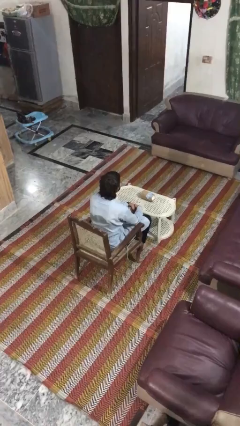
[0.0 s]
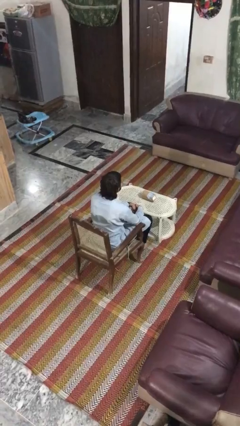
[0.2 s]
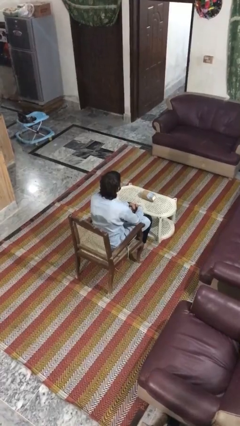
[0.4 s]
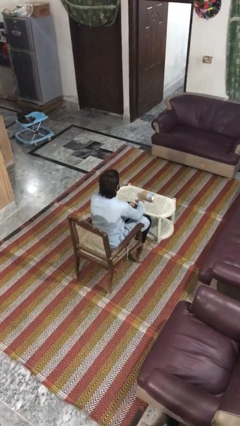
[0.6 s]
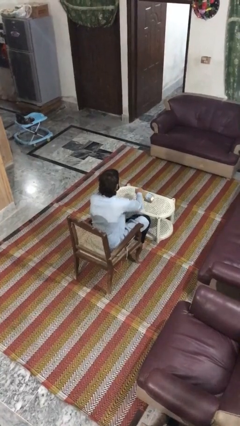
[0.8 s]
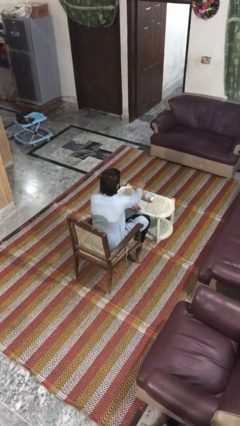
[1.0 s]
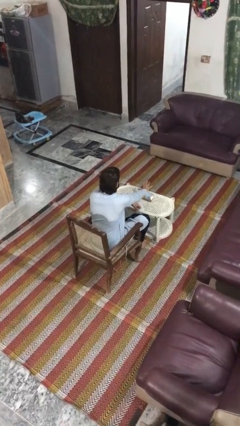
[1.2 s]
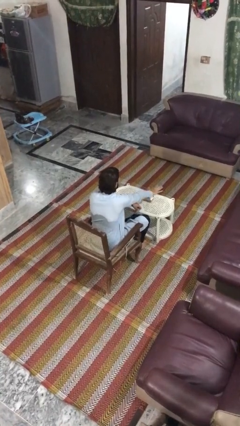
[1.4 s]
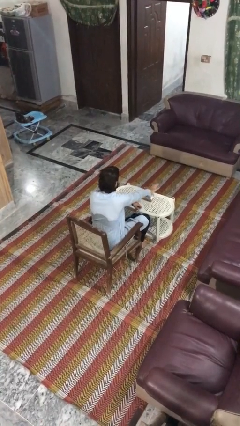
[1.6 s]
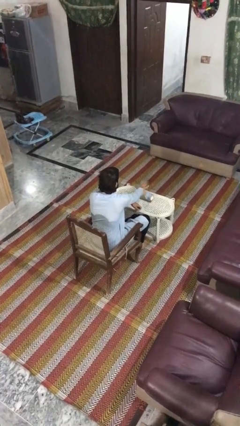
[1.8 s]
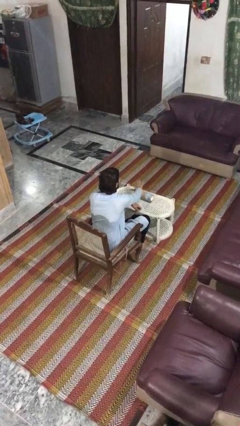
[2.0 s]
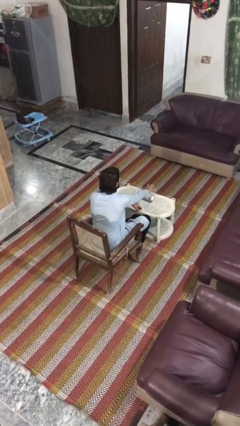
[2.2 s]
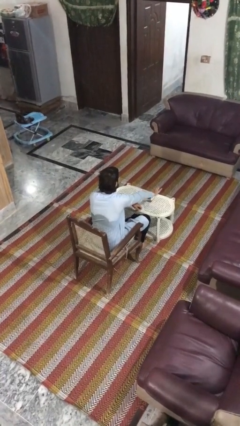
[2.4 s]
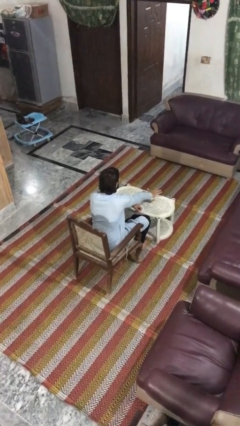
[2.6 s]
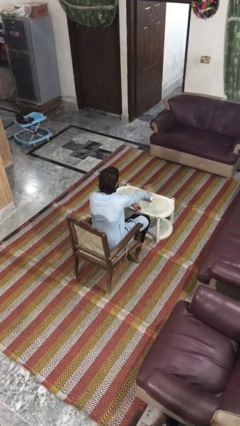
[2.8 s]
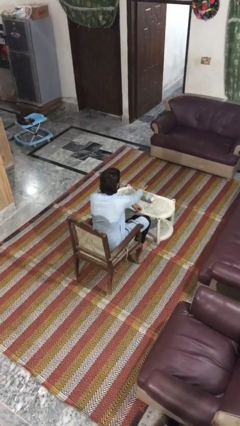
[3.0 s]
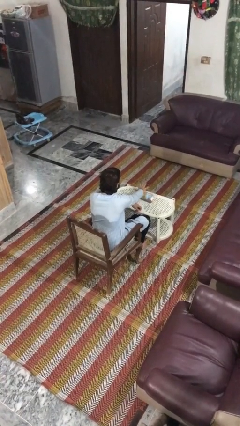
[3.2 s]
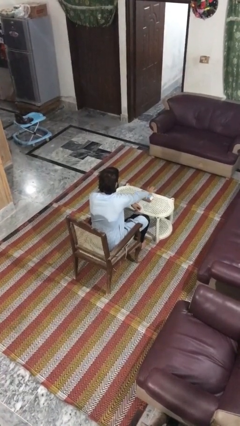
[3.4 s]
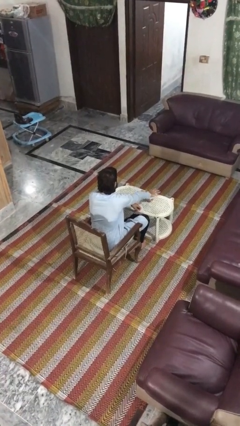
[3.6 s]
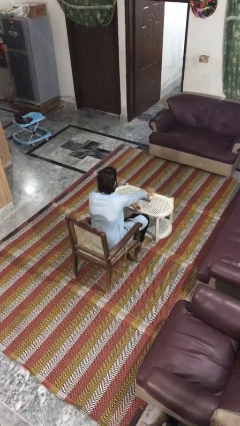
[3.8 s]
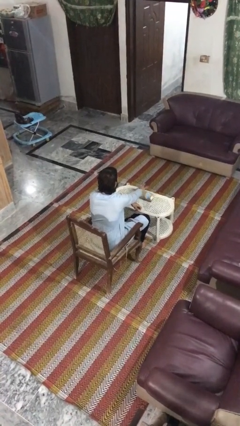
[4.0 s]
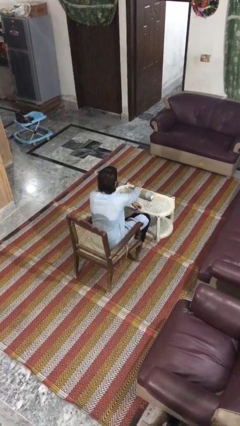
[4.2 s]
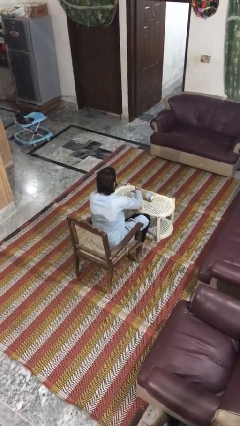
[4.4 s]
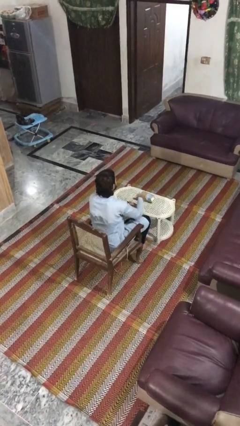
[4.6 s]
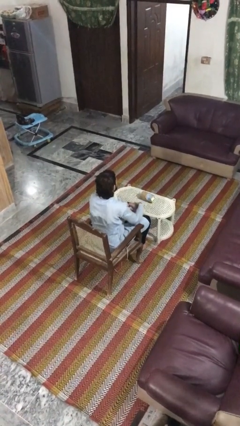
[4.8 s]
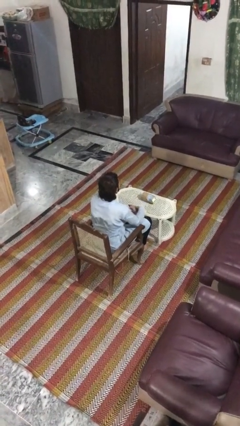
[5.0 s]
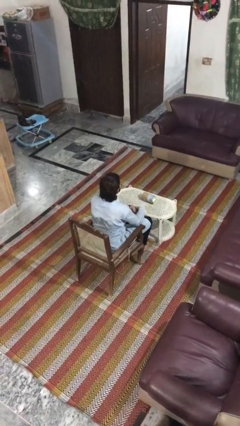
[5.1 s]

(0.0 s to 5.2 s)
person waves hand over object

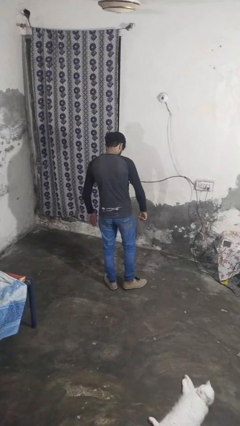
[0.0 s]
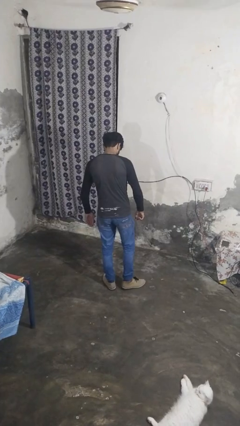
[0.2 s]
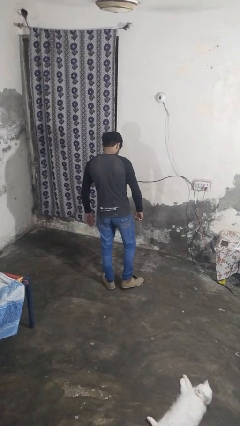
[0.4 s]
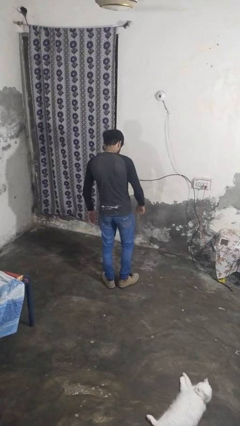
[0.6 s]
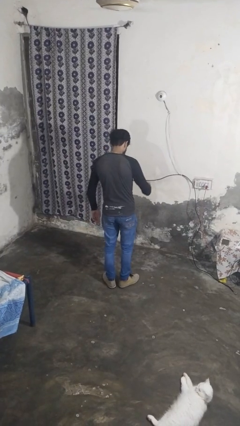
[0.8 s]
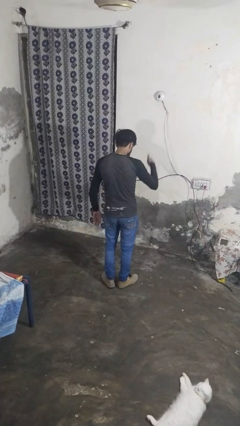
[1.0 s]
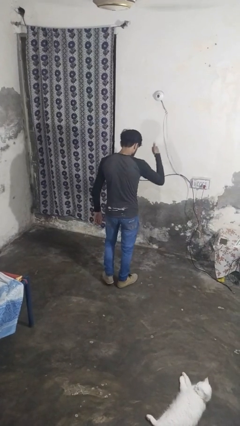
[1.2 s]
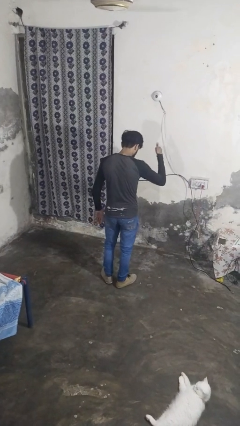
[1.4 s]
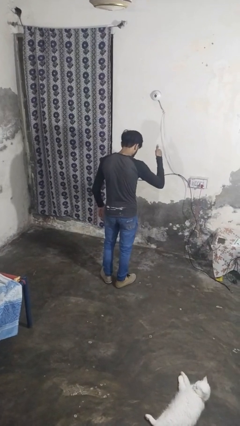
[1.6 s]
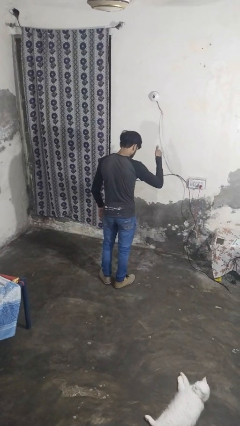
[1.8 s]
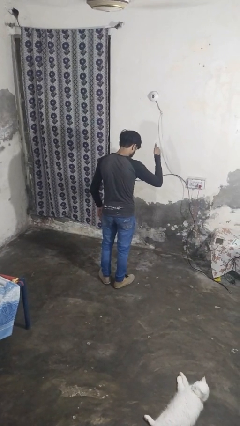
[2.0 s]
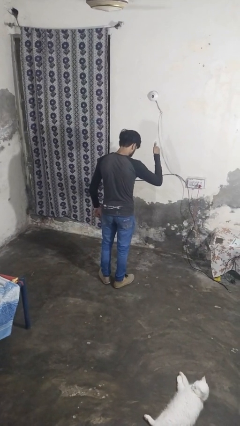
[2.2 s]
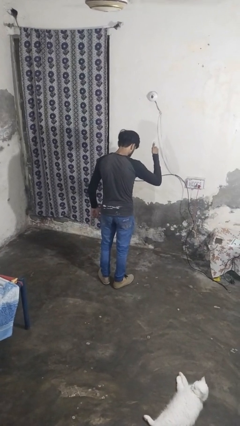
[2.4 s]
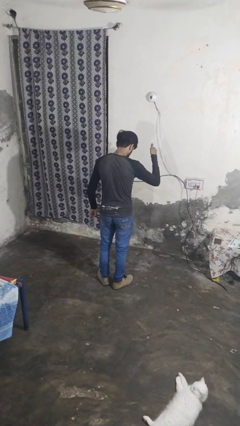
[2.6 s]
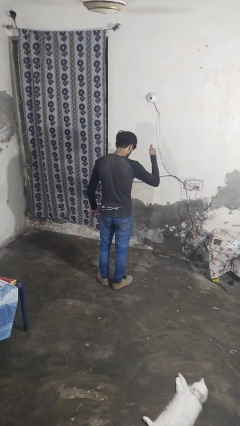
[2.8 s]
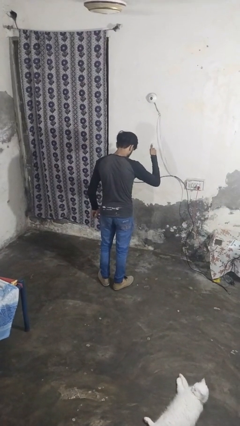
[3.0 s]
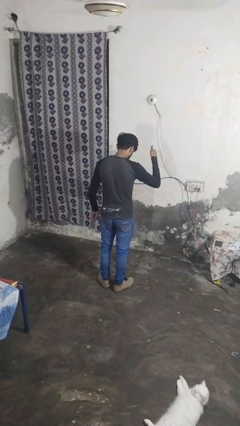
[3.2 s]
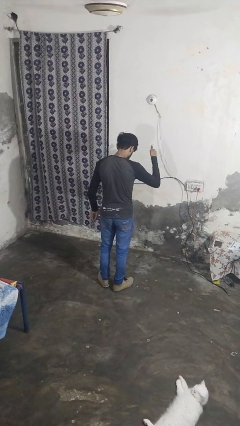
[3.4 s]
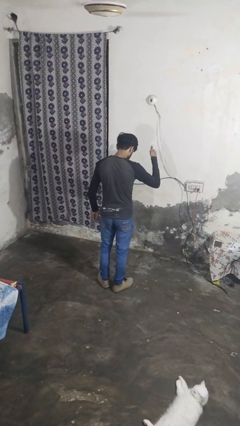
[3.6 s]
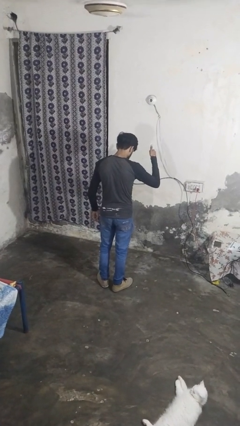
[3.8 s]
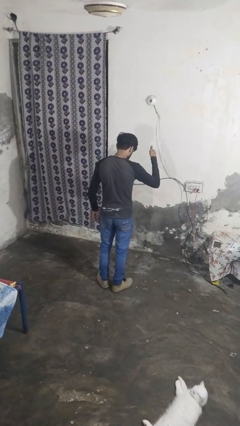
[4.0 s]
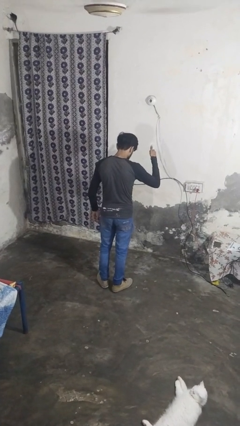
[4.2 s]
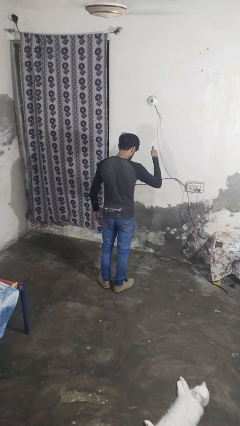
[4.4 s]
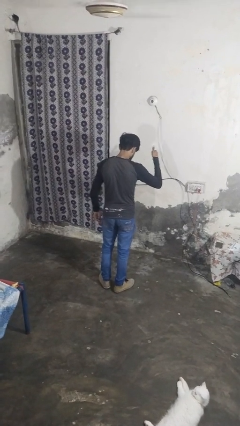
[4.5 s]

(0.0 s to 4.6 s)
person gestures thumbs up

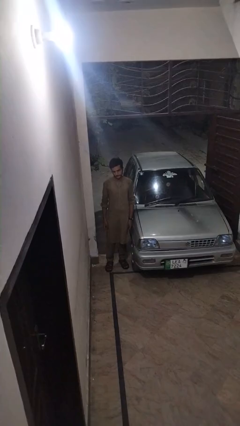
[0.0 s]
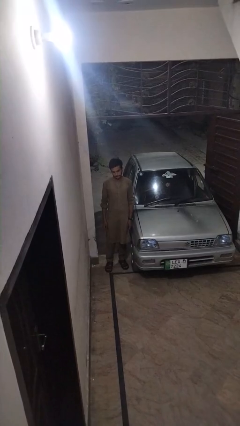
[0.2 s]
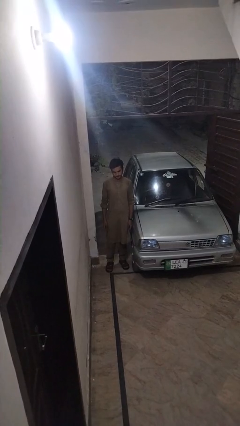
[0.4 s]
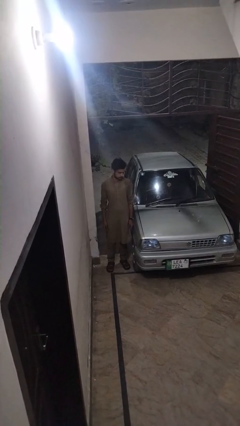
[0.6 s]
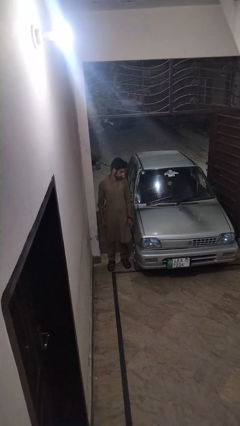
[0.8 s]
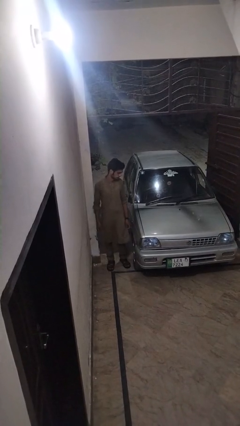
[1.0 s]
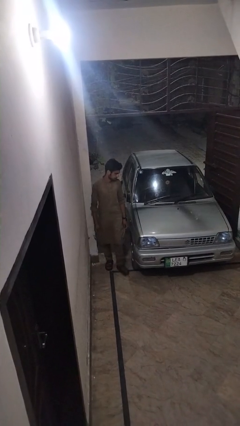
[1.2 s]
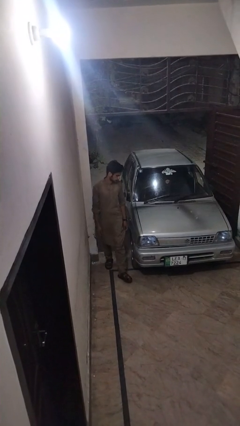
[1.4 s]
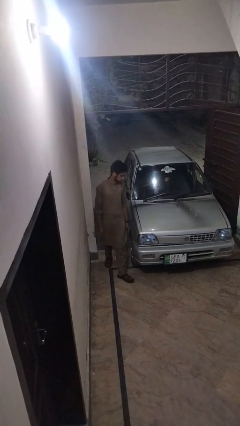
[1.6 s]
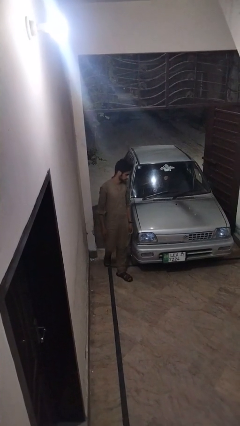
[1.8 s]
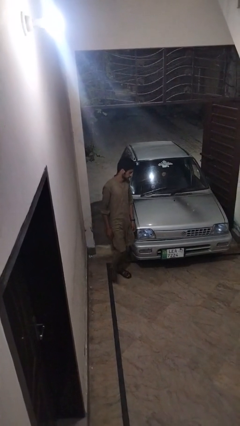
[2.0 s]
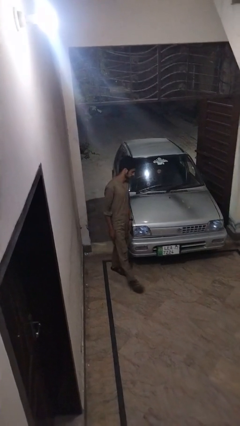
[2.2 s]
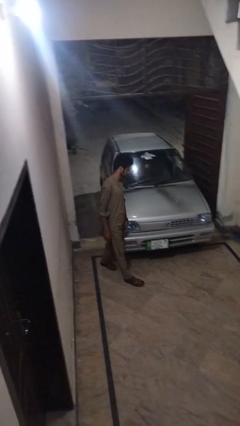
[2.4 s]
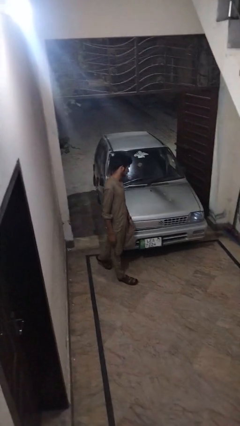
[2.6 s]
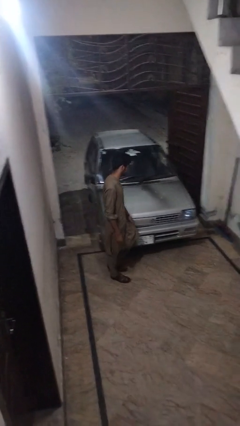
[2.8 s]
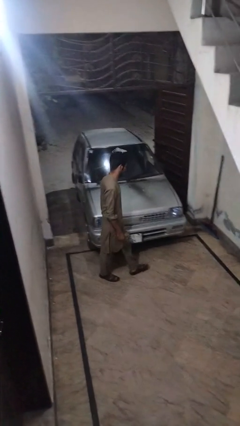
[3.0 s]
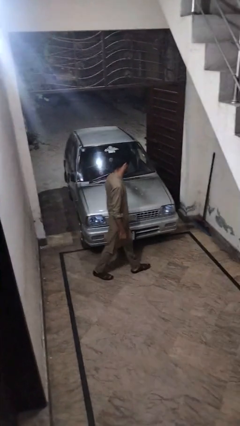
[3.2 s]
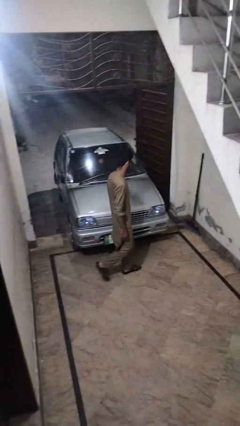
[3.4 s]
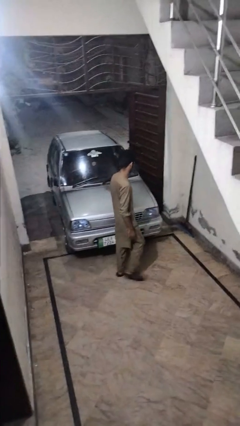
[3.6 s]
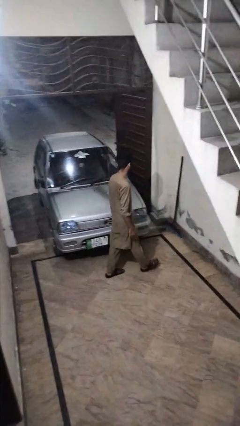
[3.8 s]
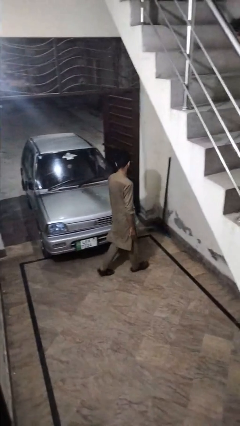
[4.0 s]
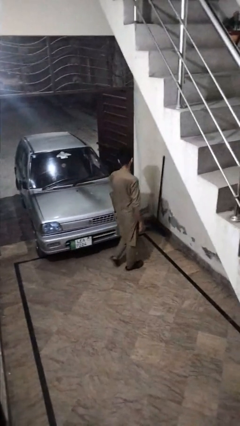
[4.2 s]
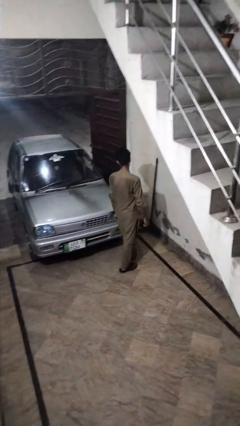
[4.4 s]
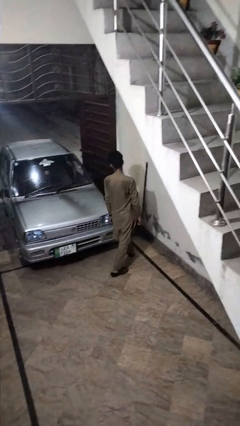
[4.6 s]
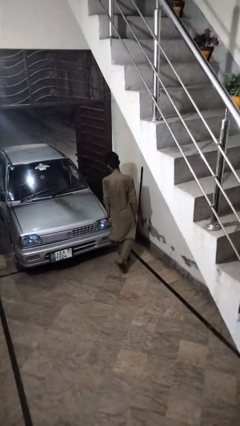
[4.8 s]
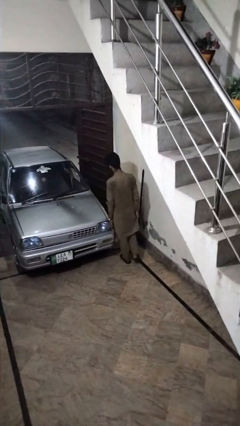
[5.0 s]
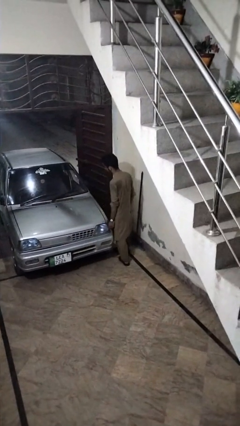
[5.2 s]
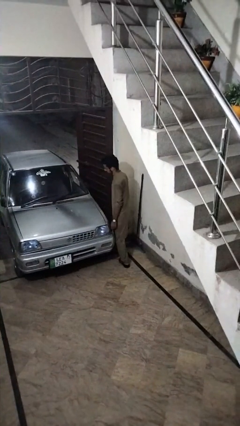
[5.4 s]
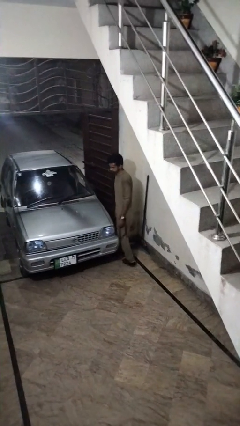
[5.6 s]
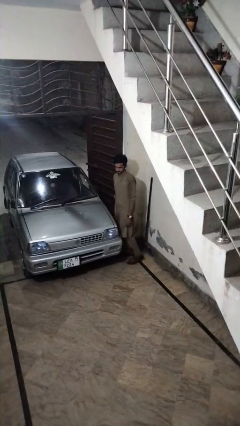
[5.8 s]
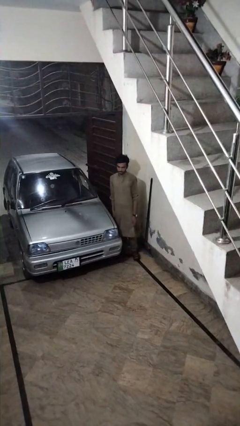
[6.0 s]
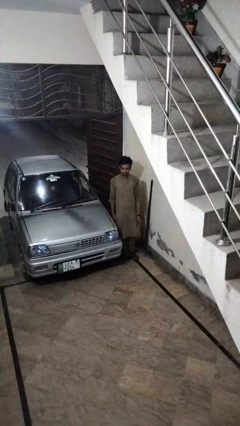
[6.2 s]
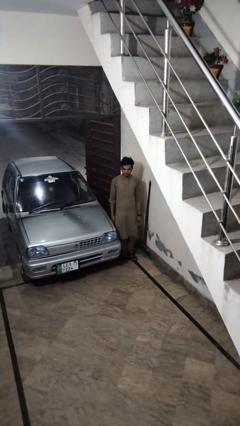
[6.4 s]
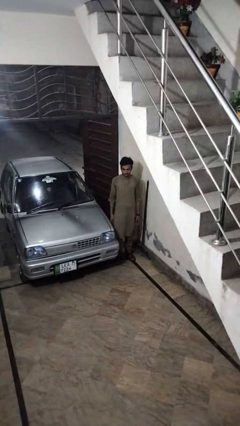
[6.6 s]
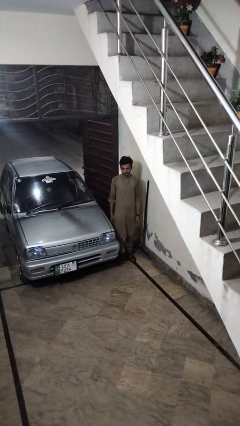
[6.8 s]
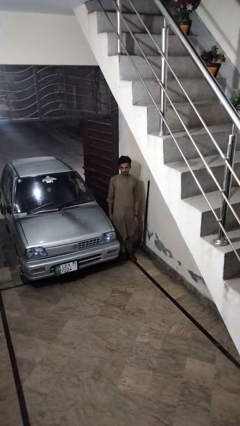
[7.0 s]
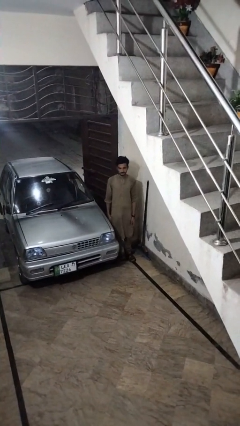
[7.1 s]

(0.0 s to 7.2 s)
person walks around car

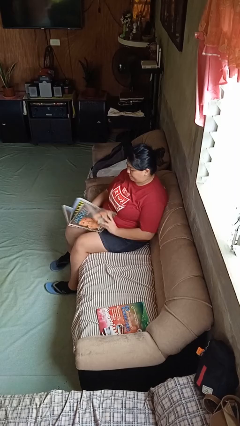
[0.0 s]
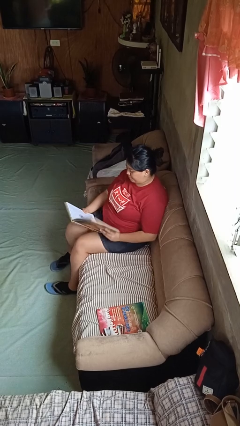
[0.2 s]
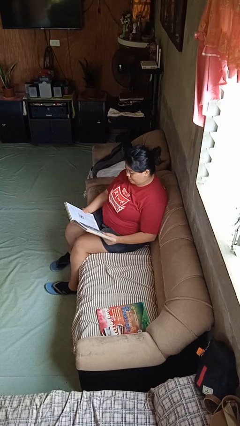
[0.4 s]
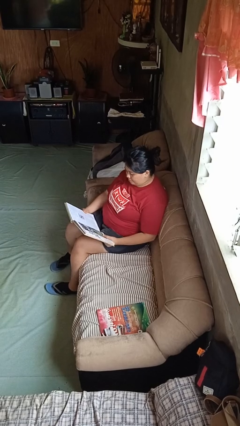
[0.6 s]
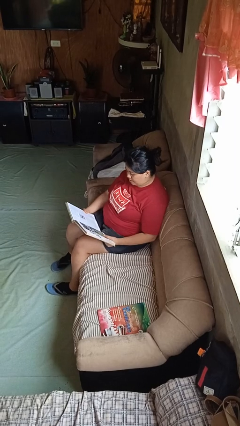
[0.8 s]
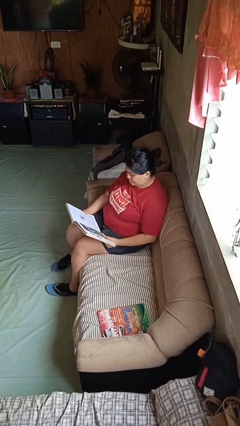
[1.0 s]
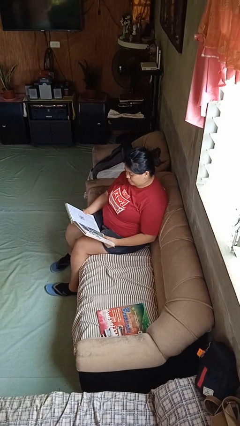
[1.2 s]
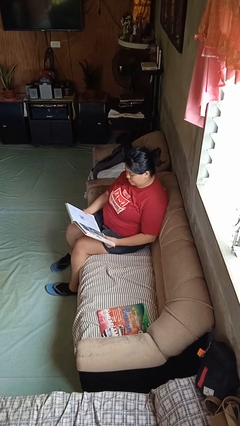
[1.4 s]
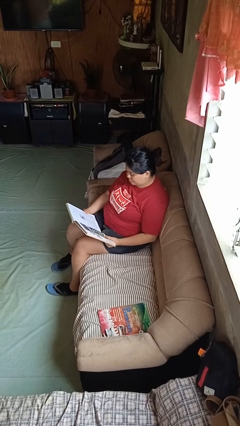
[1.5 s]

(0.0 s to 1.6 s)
person reads book
